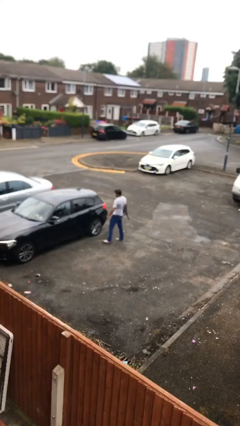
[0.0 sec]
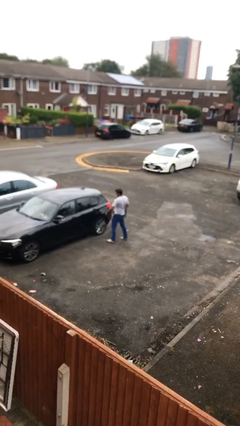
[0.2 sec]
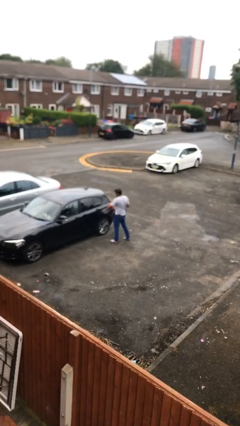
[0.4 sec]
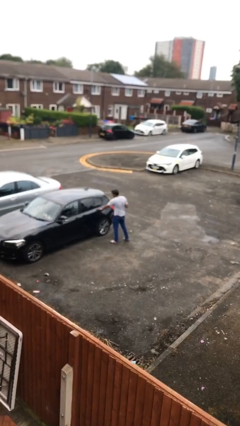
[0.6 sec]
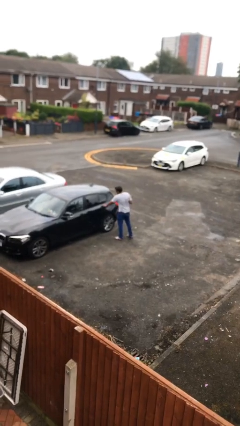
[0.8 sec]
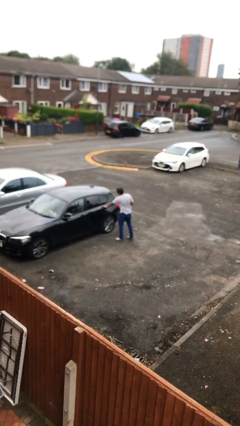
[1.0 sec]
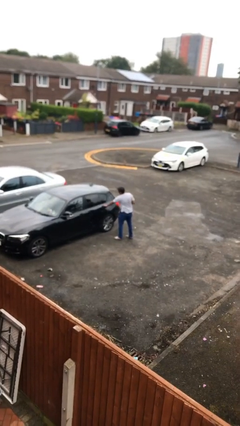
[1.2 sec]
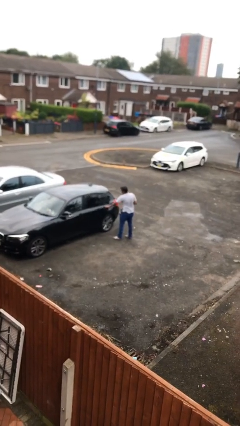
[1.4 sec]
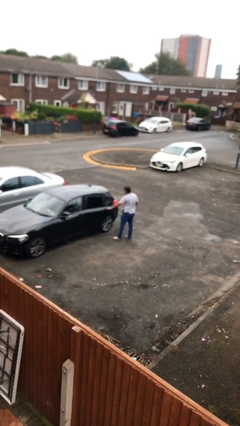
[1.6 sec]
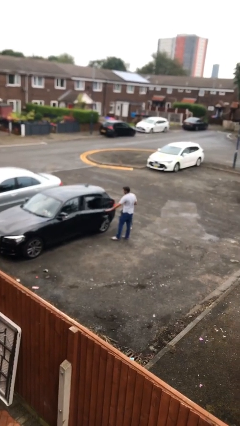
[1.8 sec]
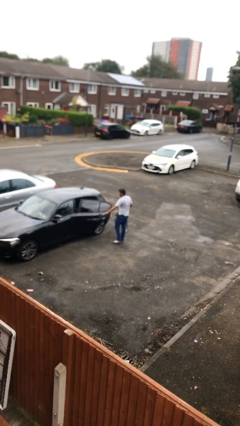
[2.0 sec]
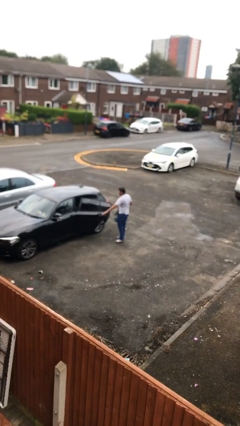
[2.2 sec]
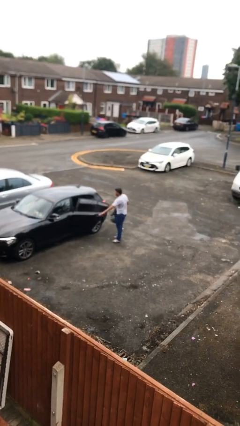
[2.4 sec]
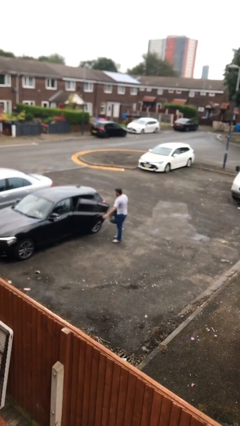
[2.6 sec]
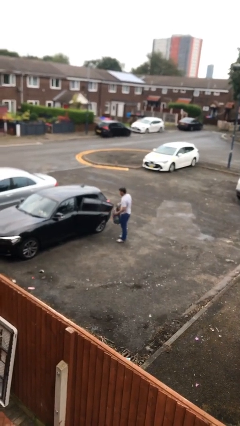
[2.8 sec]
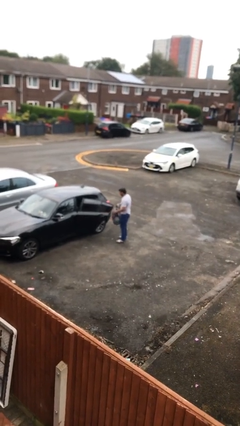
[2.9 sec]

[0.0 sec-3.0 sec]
person opens car door

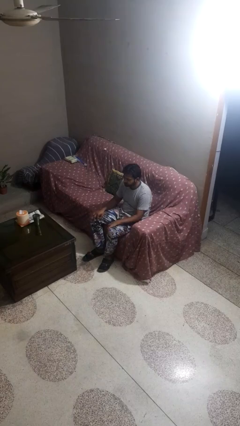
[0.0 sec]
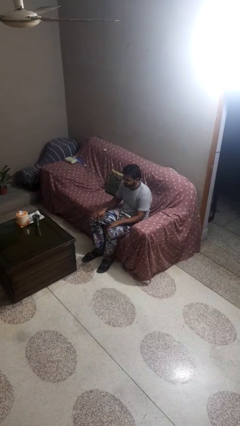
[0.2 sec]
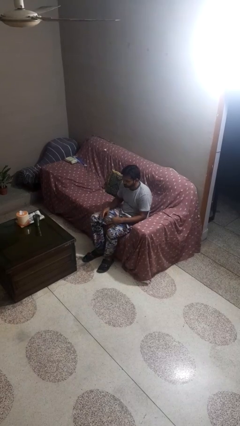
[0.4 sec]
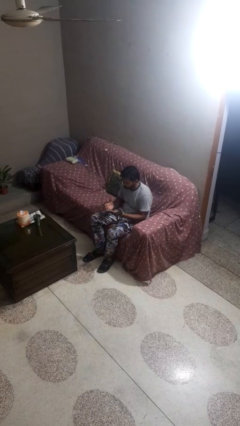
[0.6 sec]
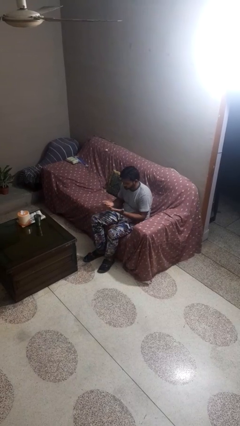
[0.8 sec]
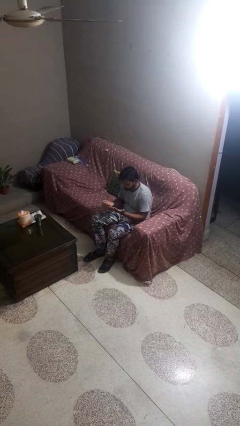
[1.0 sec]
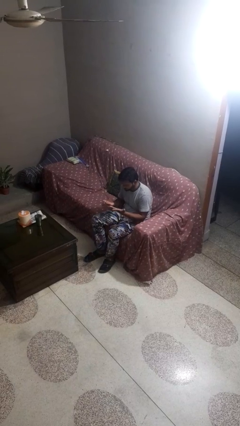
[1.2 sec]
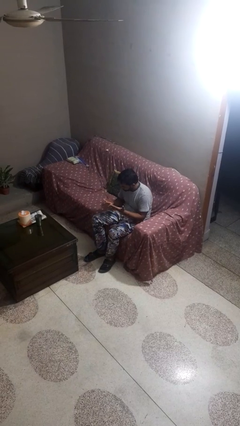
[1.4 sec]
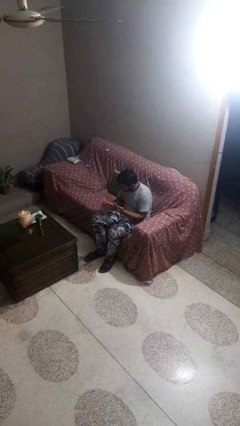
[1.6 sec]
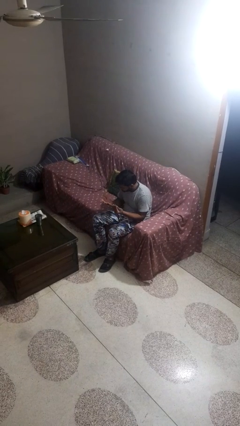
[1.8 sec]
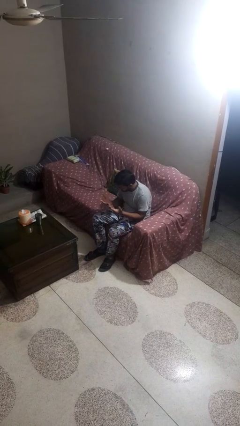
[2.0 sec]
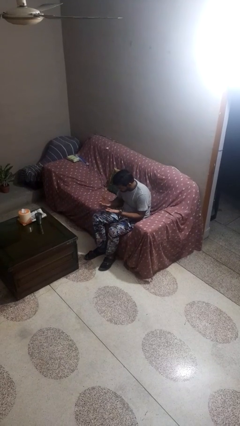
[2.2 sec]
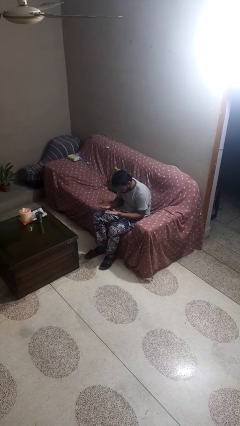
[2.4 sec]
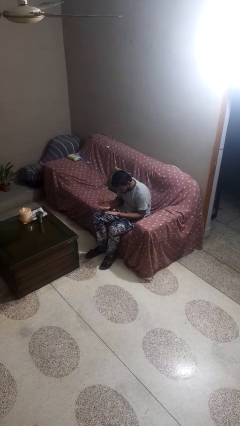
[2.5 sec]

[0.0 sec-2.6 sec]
person looks at hands in lap

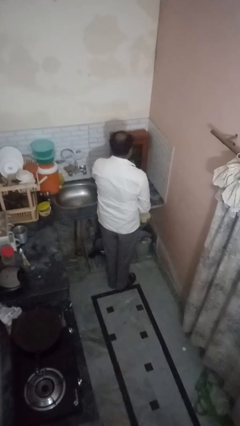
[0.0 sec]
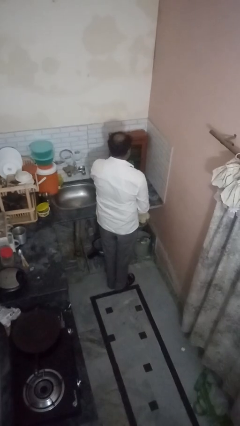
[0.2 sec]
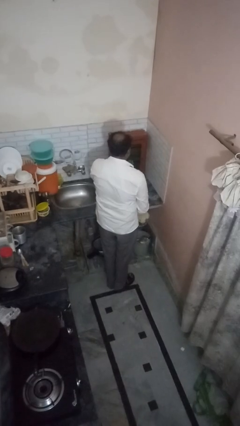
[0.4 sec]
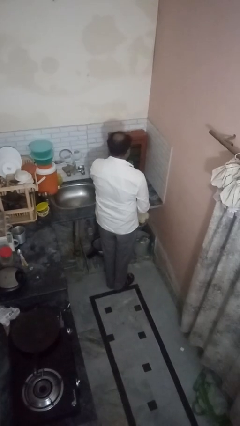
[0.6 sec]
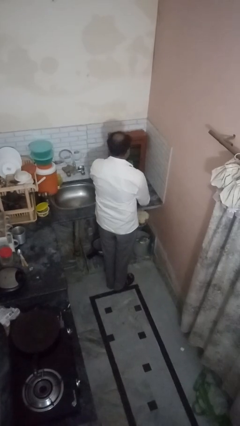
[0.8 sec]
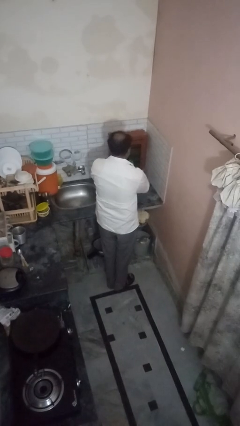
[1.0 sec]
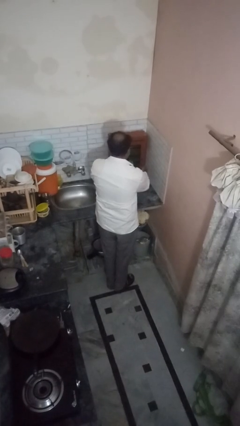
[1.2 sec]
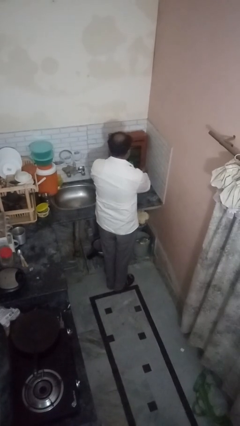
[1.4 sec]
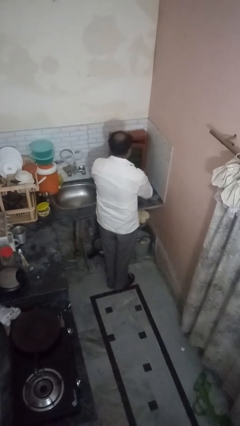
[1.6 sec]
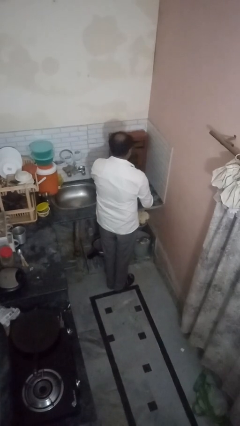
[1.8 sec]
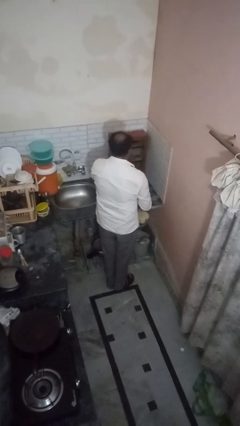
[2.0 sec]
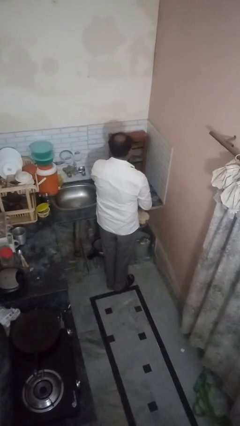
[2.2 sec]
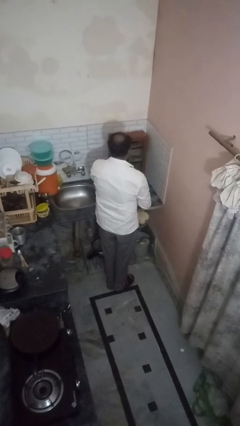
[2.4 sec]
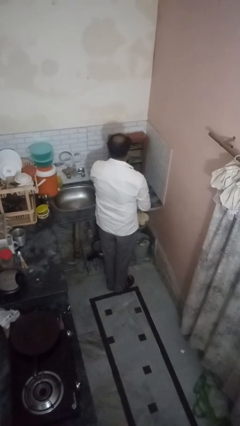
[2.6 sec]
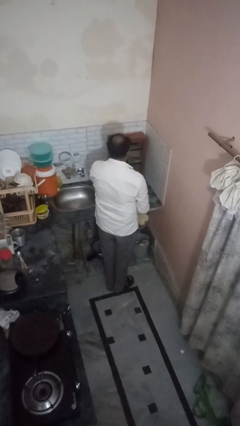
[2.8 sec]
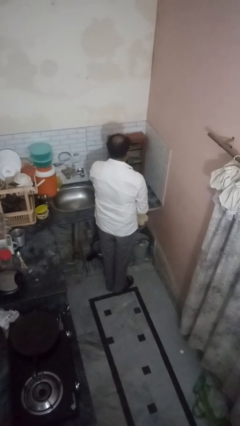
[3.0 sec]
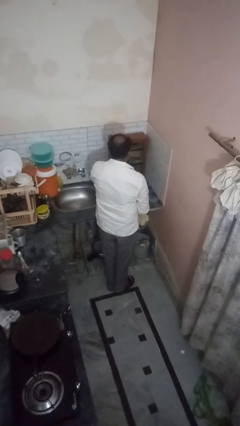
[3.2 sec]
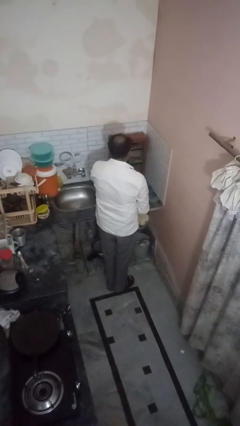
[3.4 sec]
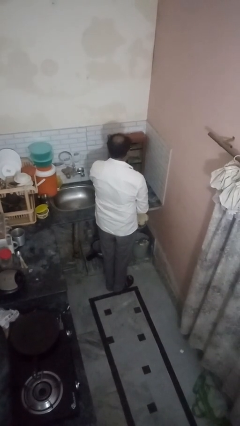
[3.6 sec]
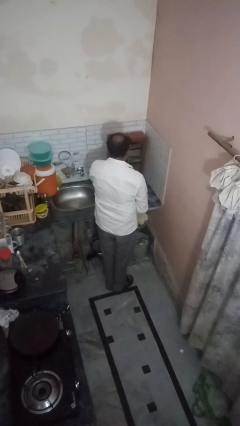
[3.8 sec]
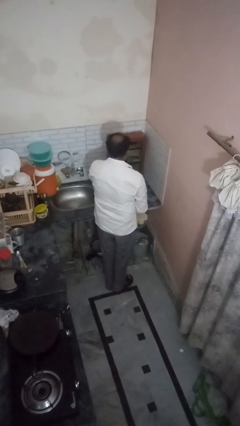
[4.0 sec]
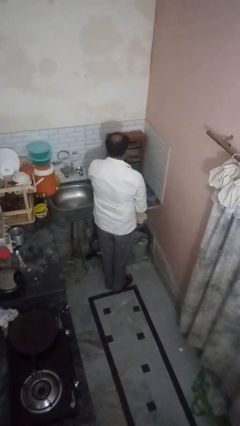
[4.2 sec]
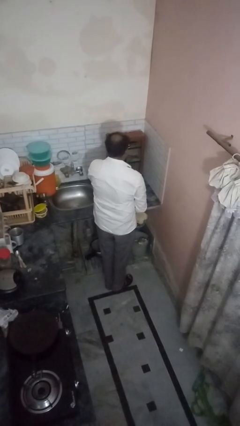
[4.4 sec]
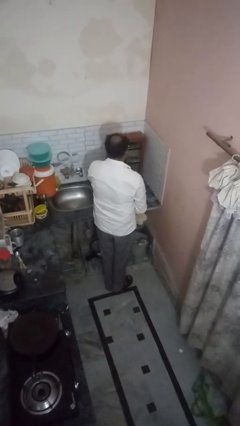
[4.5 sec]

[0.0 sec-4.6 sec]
person opens kitchen drawer

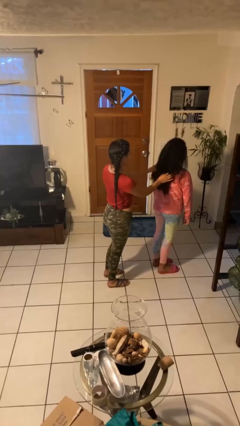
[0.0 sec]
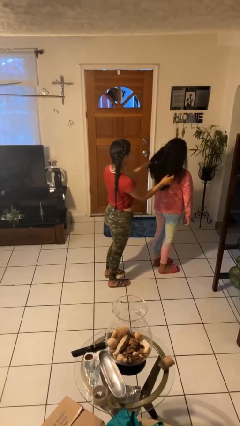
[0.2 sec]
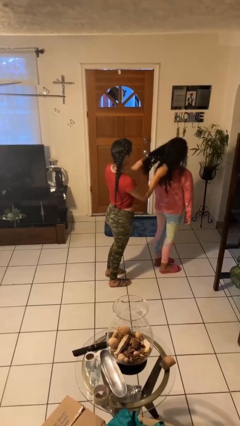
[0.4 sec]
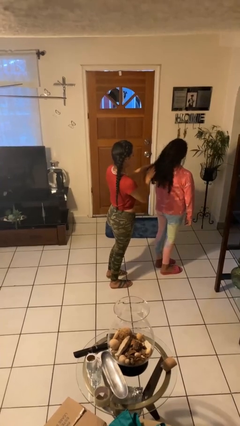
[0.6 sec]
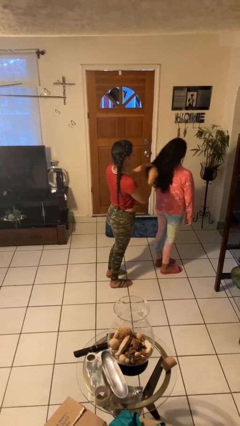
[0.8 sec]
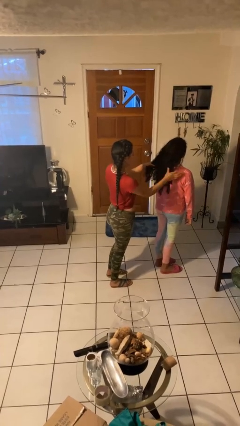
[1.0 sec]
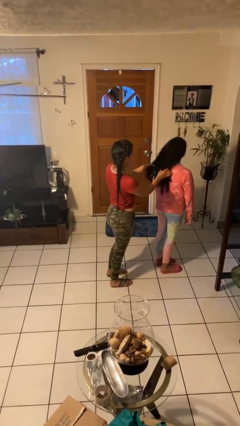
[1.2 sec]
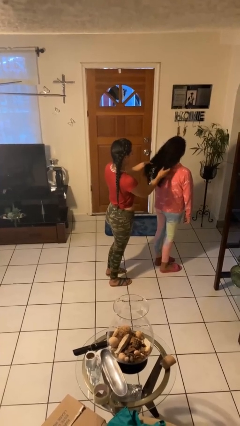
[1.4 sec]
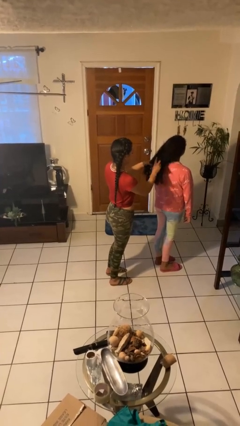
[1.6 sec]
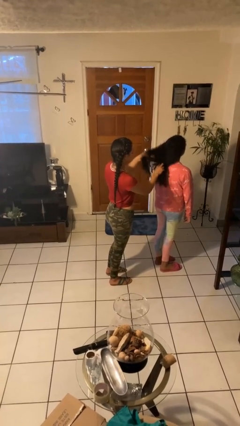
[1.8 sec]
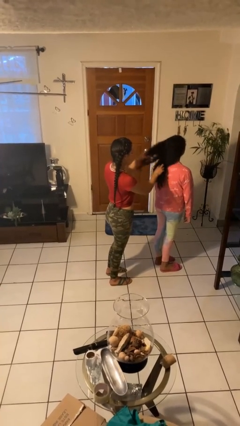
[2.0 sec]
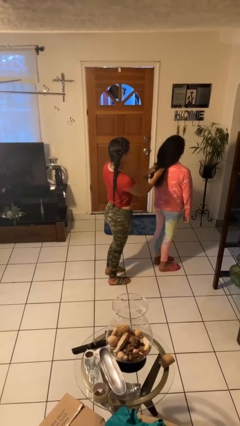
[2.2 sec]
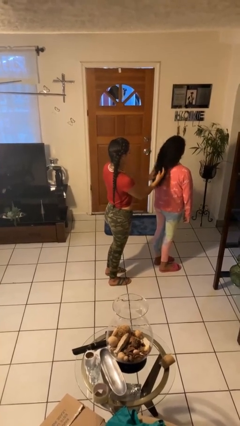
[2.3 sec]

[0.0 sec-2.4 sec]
person braids hair of person

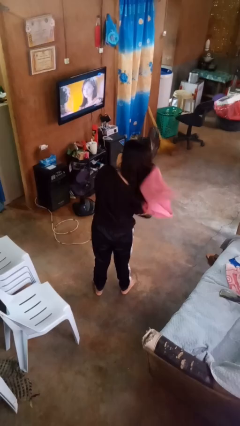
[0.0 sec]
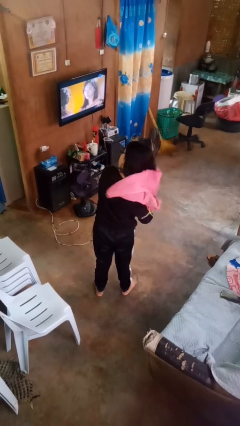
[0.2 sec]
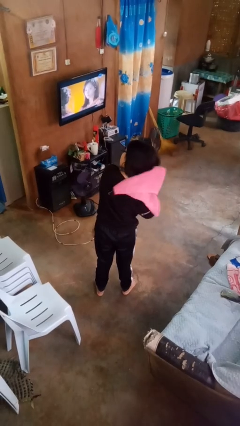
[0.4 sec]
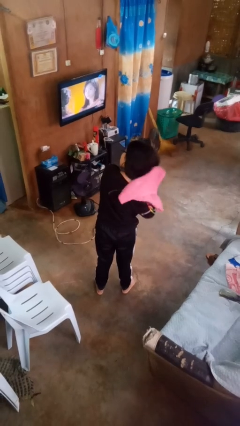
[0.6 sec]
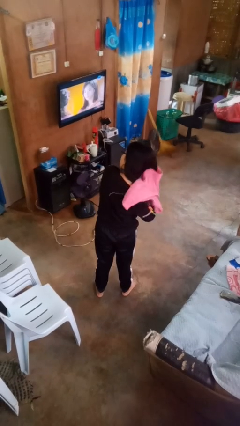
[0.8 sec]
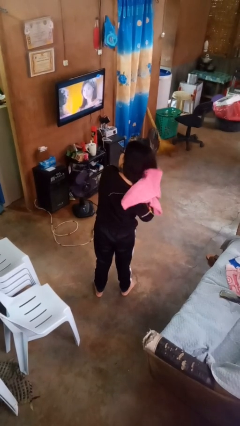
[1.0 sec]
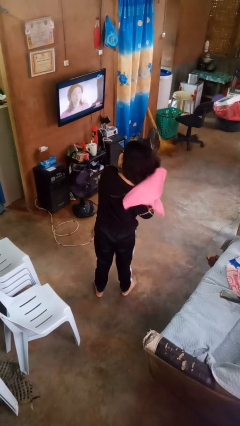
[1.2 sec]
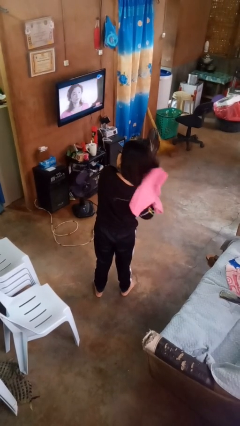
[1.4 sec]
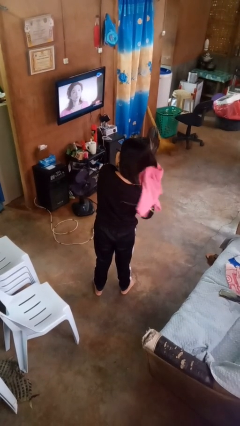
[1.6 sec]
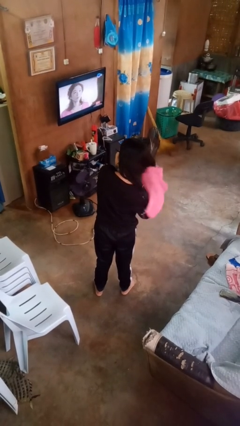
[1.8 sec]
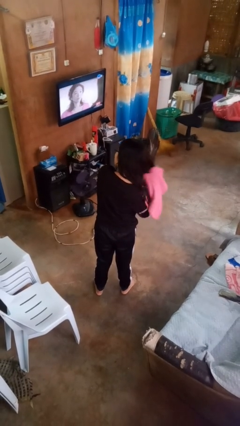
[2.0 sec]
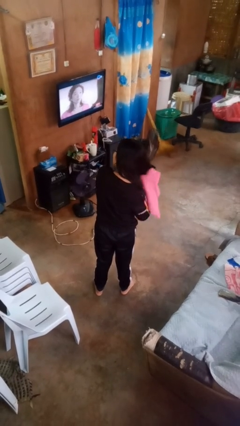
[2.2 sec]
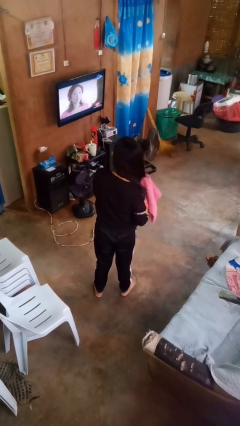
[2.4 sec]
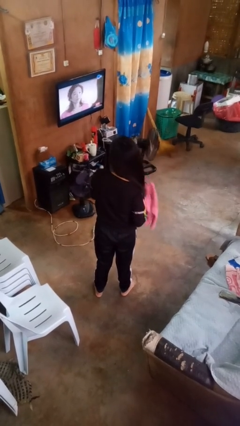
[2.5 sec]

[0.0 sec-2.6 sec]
person dries hair with towel

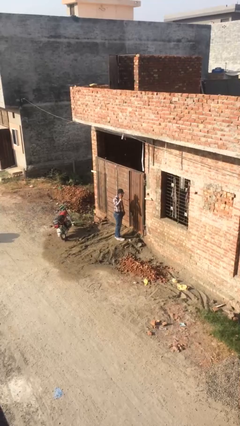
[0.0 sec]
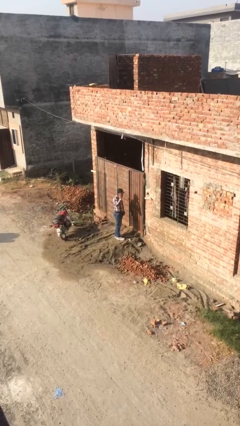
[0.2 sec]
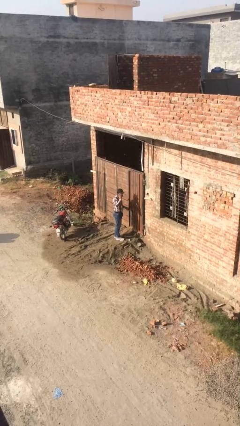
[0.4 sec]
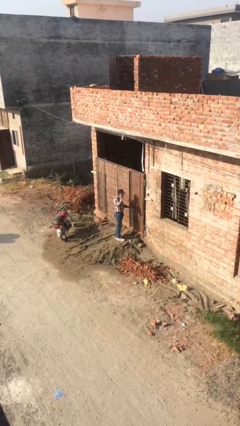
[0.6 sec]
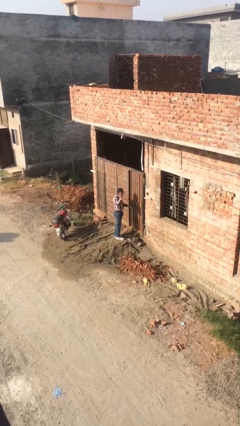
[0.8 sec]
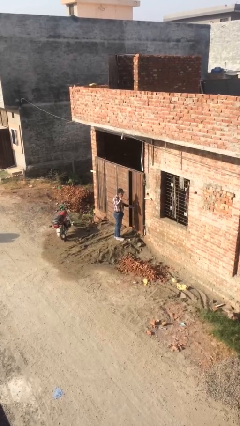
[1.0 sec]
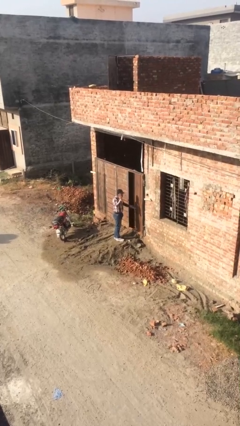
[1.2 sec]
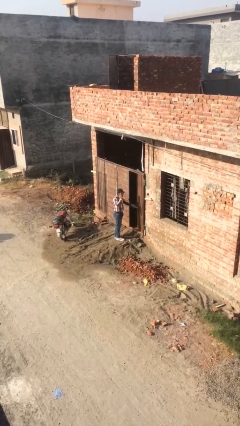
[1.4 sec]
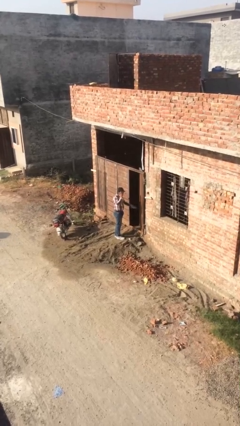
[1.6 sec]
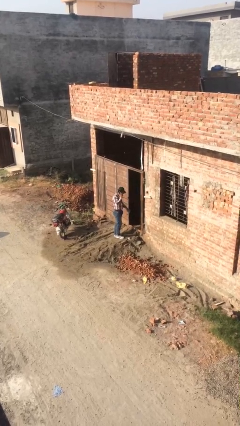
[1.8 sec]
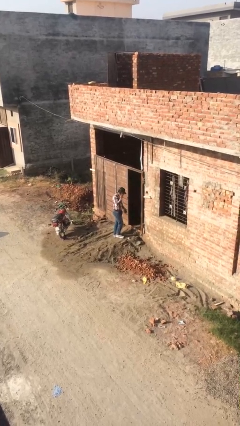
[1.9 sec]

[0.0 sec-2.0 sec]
person opens facility door

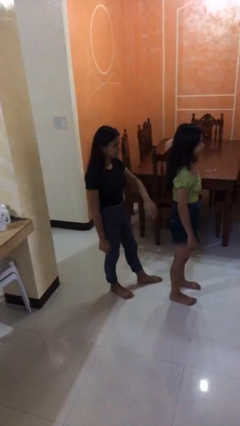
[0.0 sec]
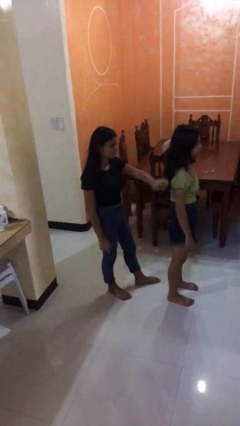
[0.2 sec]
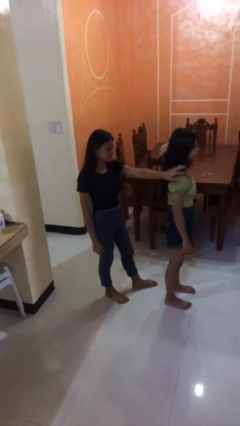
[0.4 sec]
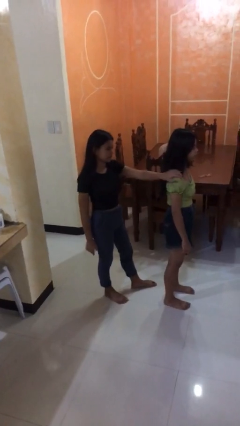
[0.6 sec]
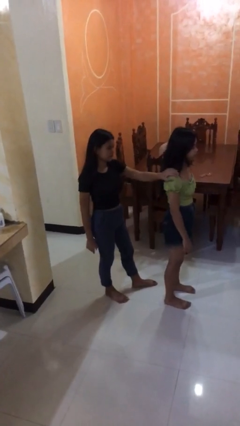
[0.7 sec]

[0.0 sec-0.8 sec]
person grabs person by shoulder
